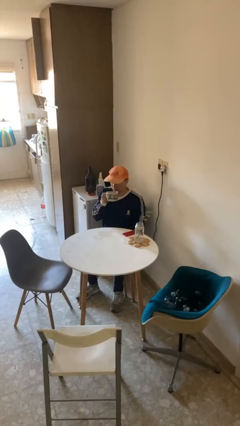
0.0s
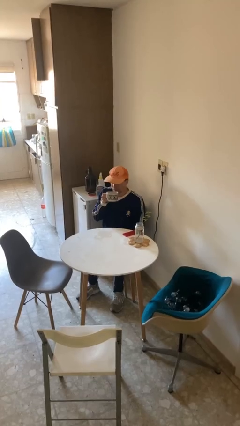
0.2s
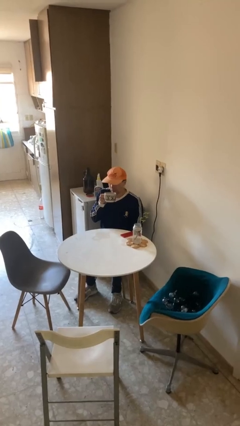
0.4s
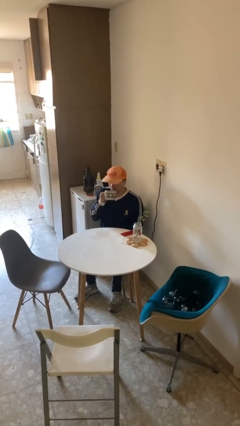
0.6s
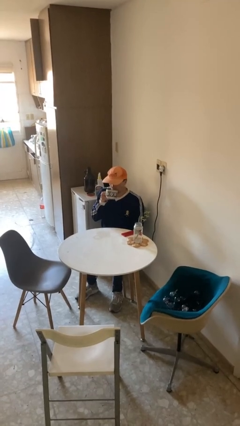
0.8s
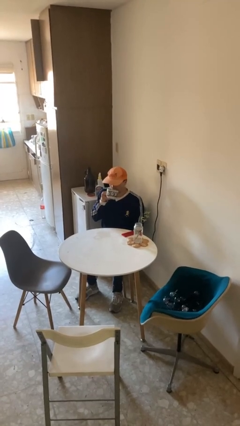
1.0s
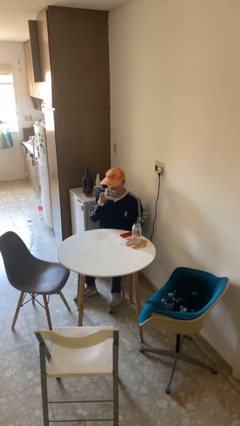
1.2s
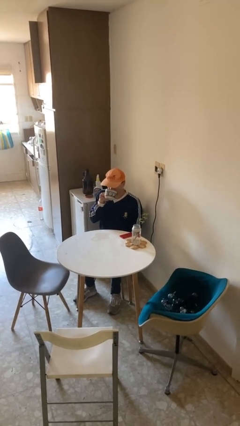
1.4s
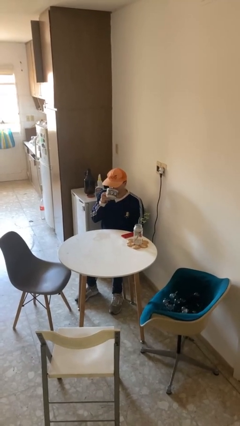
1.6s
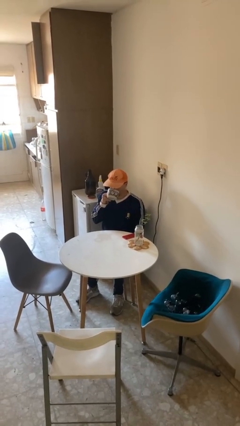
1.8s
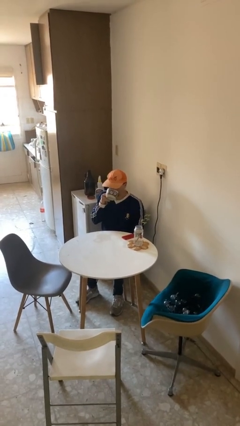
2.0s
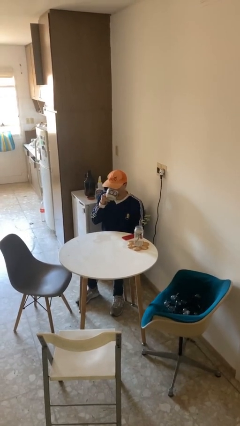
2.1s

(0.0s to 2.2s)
person drinks from mug

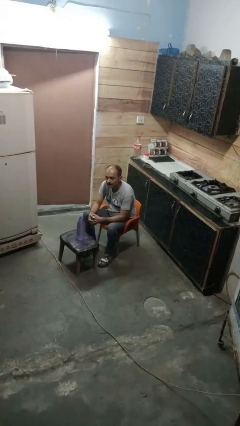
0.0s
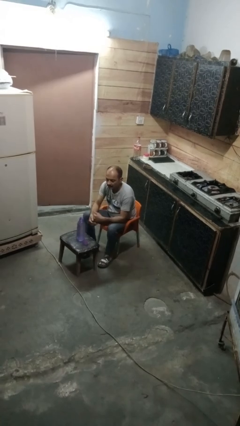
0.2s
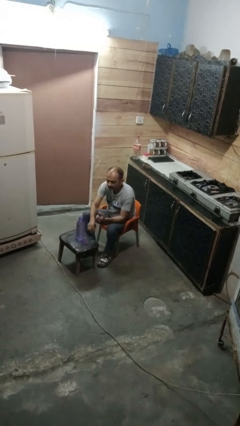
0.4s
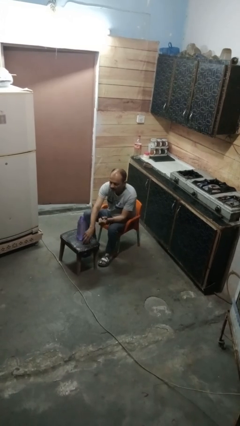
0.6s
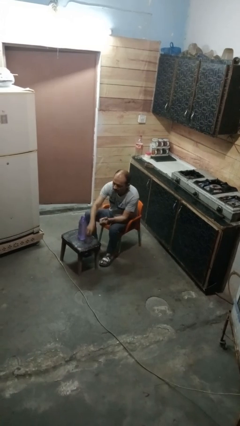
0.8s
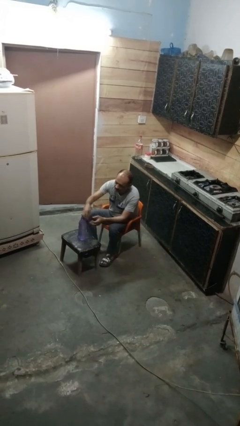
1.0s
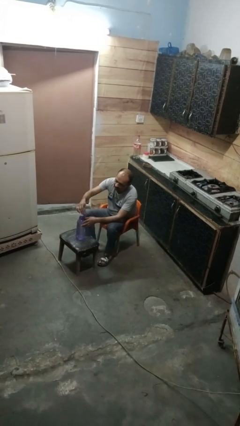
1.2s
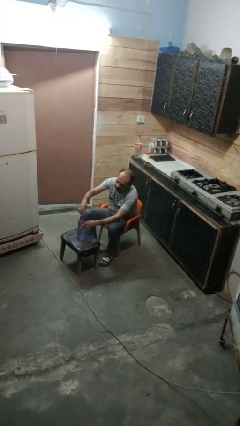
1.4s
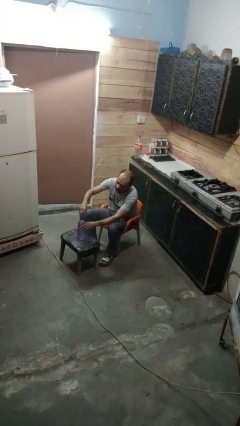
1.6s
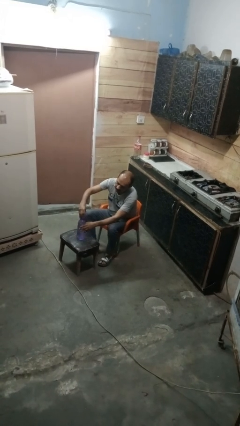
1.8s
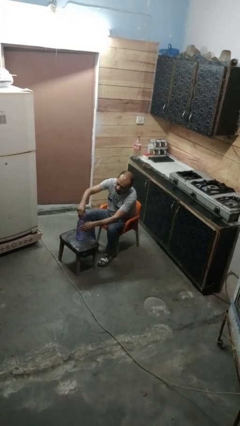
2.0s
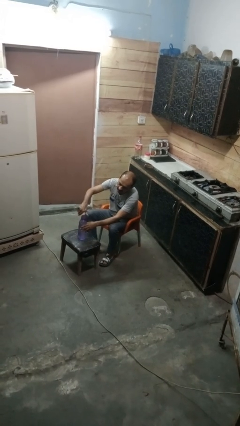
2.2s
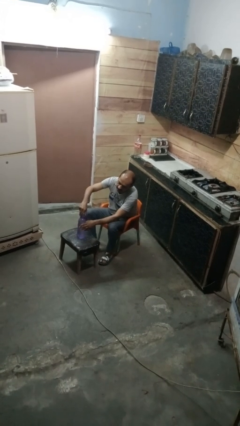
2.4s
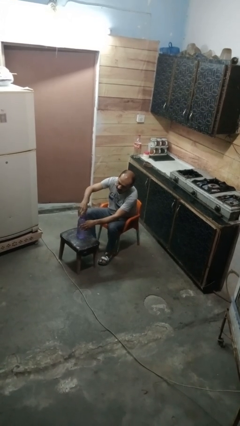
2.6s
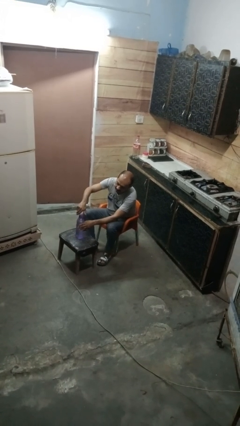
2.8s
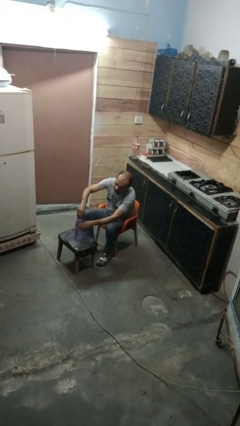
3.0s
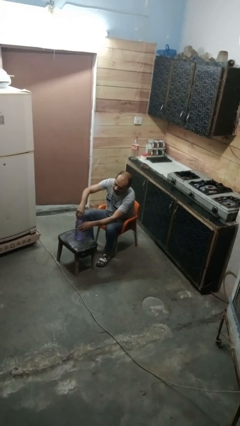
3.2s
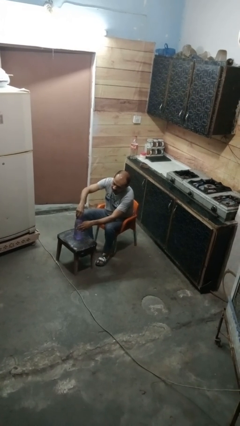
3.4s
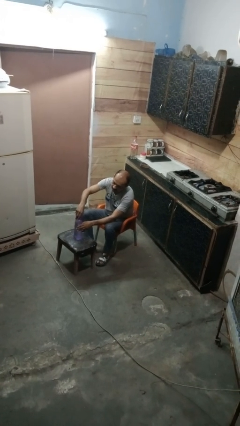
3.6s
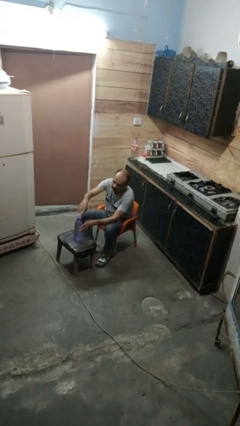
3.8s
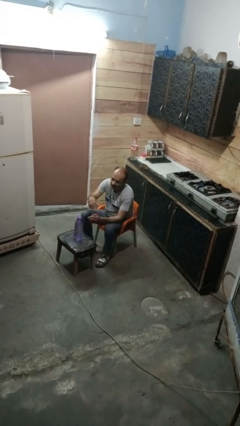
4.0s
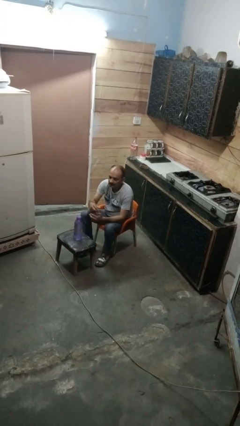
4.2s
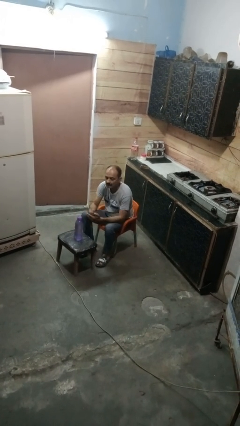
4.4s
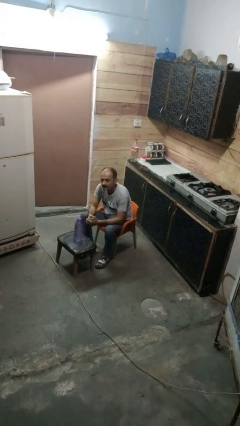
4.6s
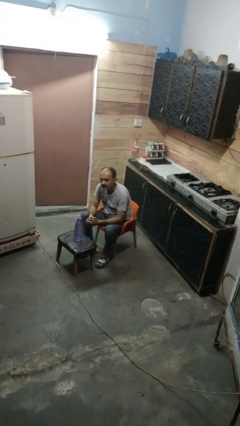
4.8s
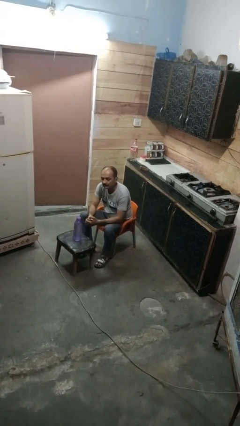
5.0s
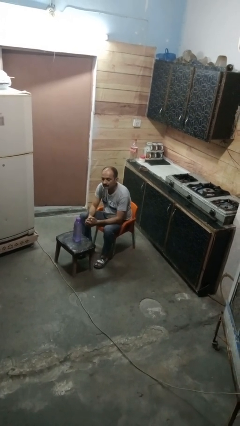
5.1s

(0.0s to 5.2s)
person screws lid to bottle

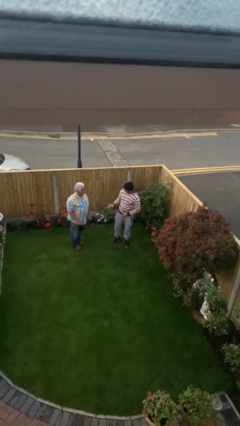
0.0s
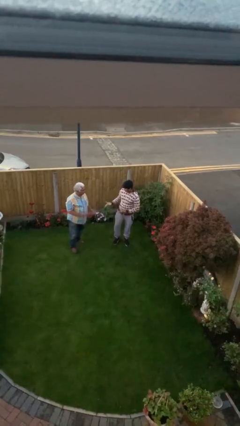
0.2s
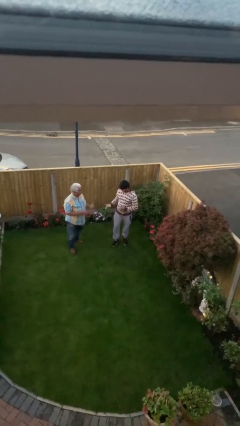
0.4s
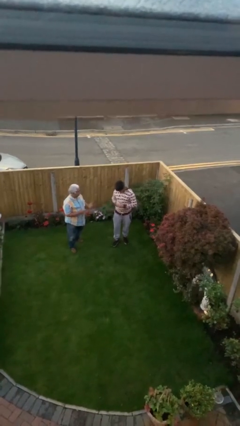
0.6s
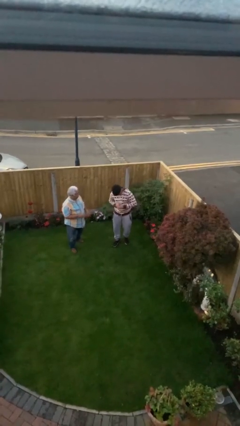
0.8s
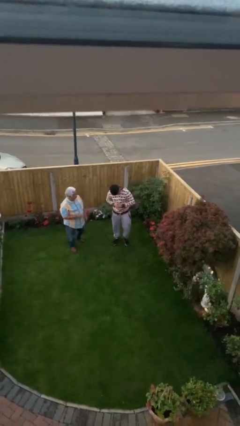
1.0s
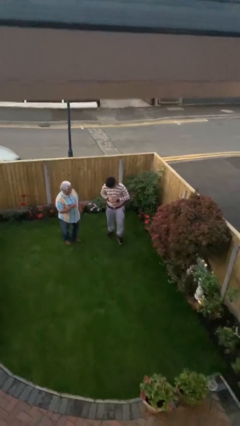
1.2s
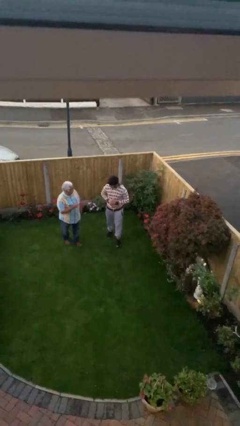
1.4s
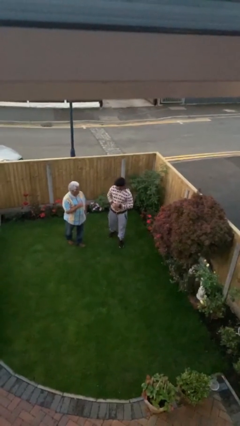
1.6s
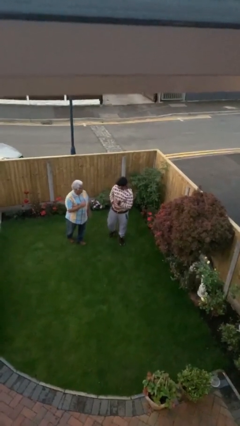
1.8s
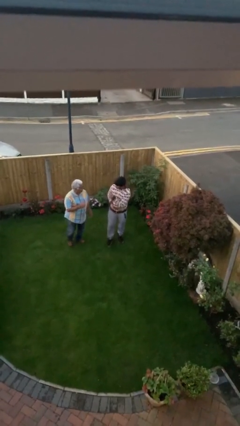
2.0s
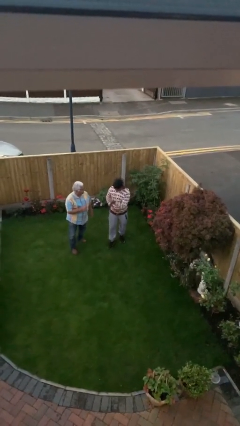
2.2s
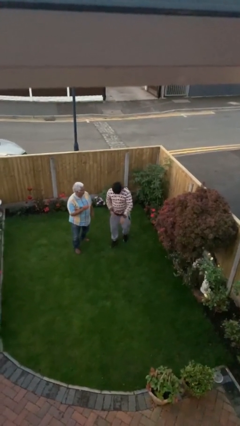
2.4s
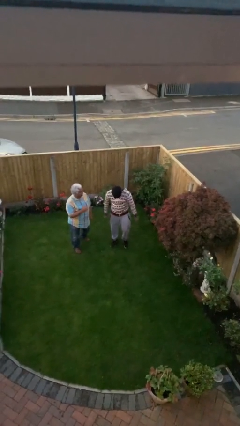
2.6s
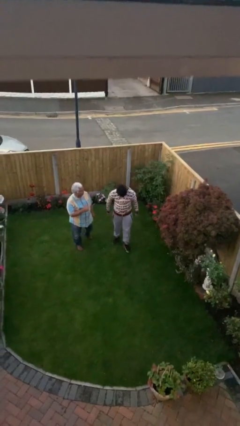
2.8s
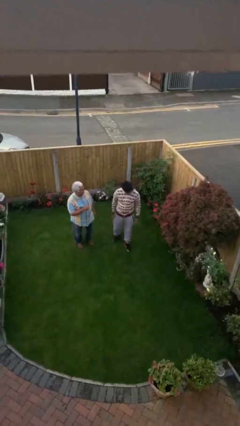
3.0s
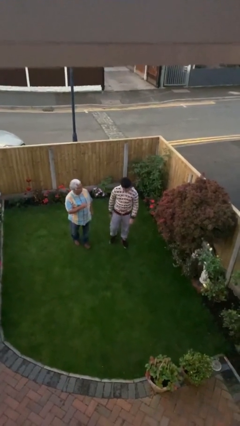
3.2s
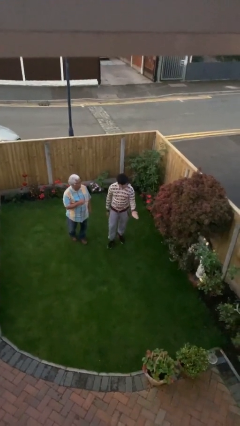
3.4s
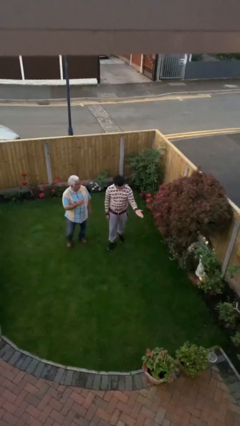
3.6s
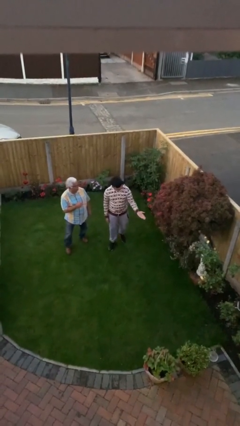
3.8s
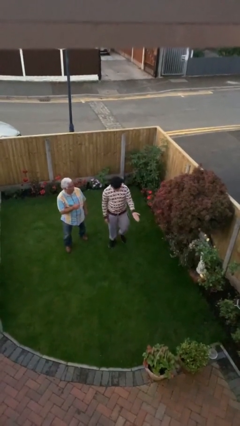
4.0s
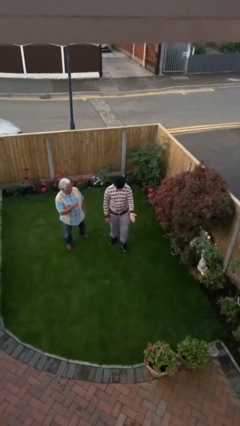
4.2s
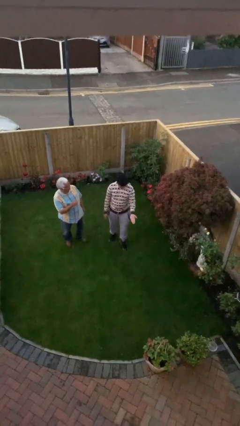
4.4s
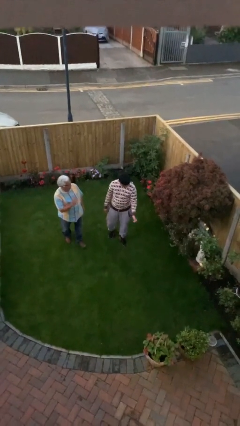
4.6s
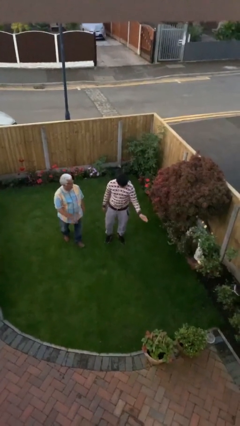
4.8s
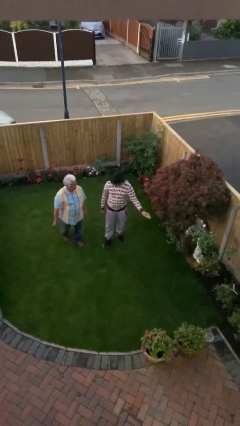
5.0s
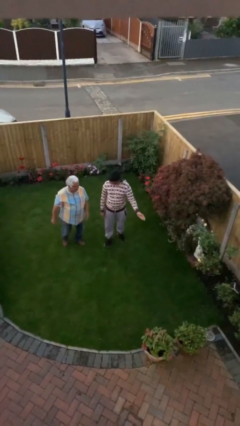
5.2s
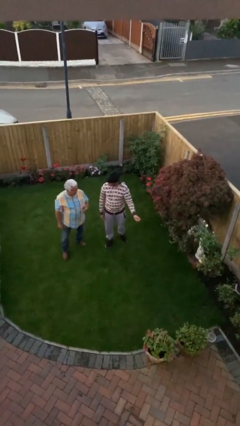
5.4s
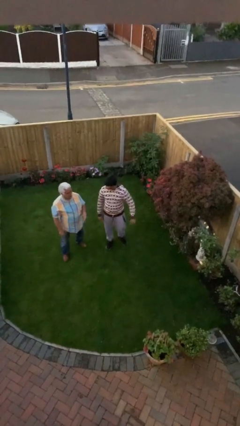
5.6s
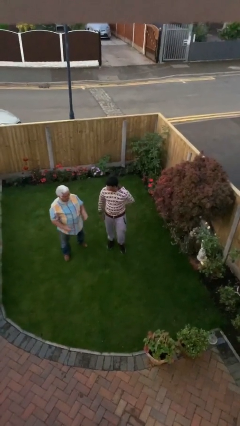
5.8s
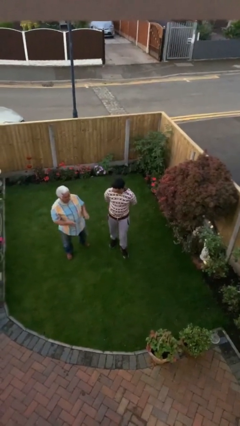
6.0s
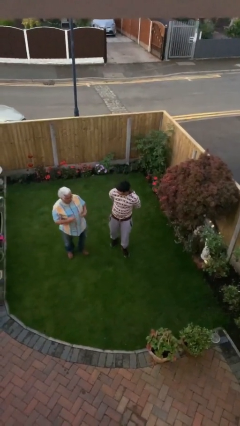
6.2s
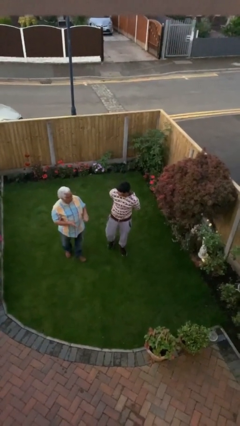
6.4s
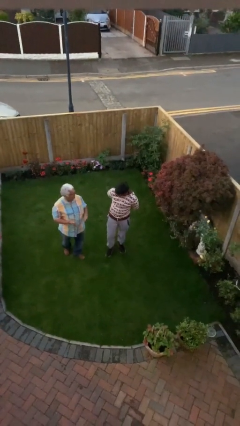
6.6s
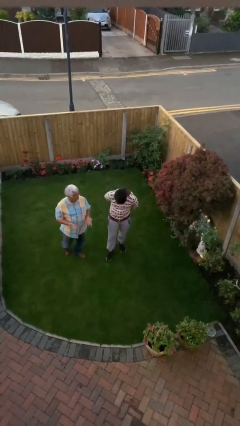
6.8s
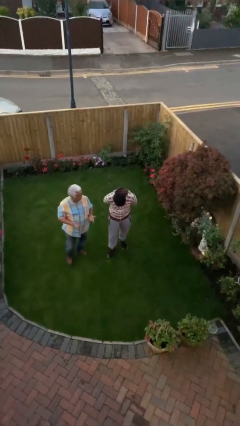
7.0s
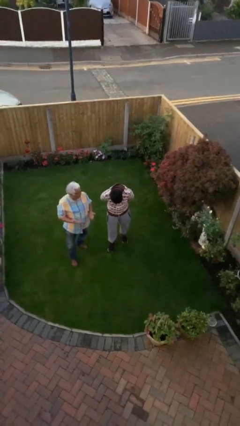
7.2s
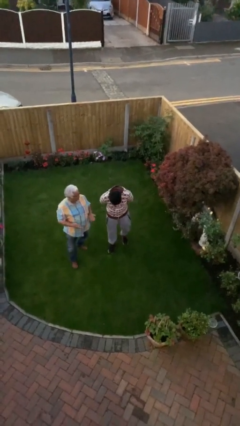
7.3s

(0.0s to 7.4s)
person talks to person

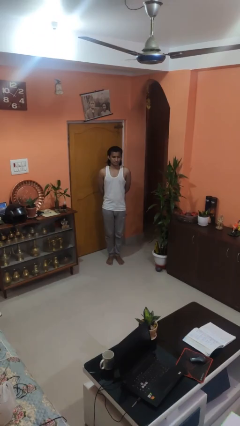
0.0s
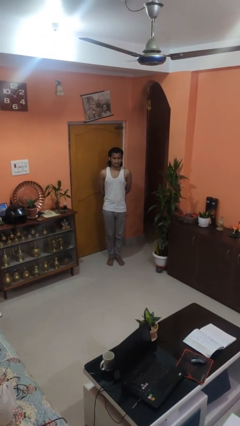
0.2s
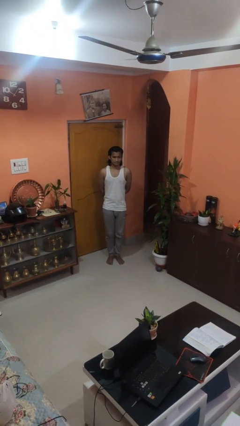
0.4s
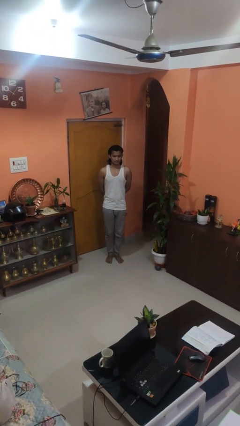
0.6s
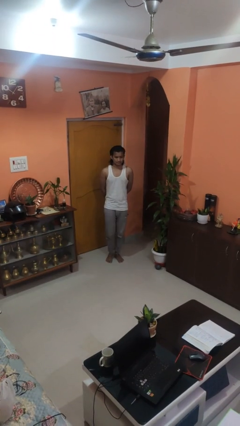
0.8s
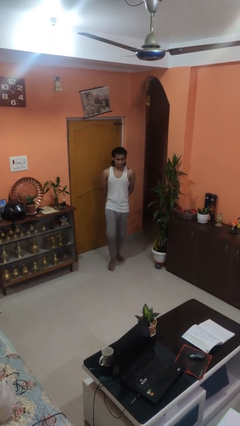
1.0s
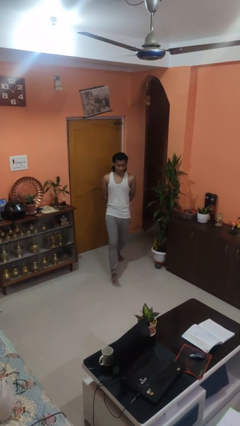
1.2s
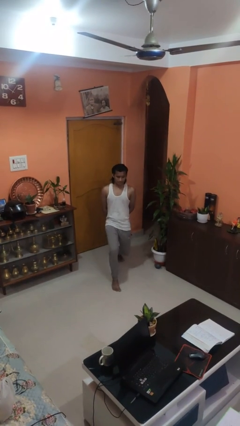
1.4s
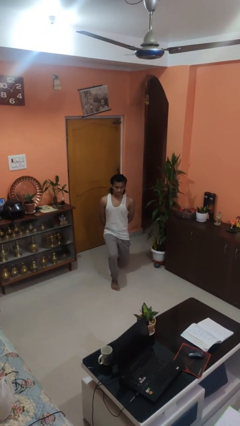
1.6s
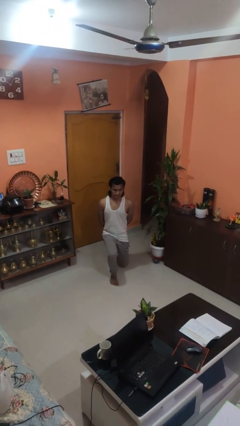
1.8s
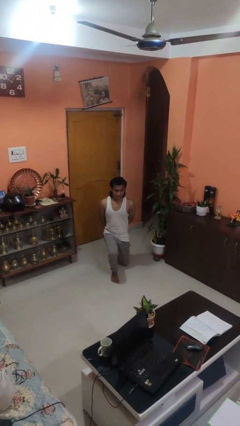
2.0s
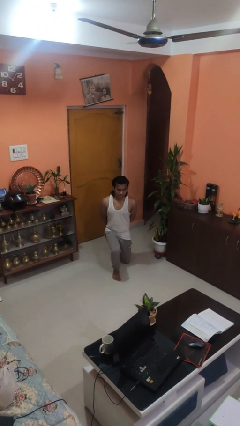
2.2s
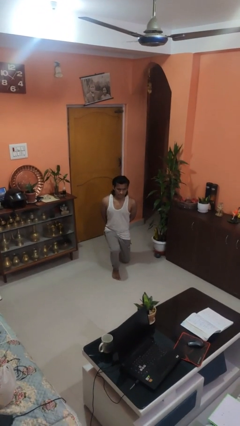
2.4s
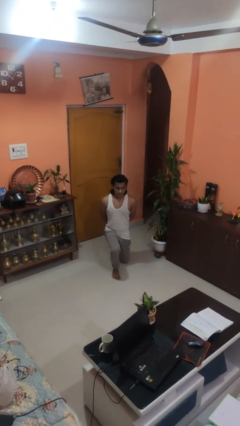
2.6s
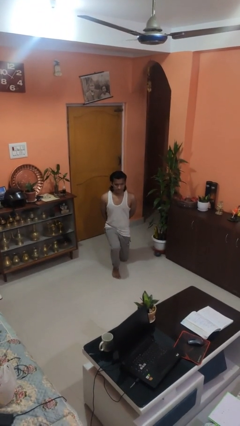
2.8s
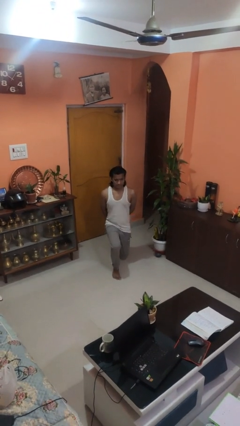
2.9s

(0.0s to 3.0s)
person kneels
